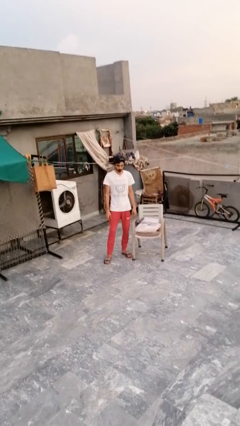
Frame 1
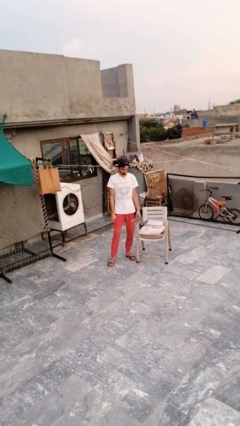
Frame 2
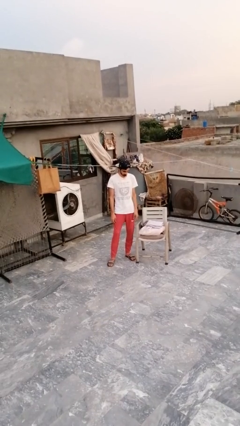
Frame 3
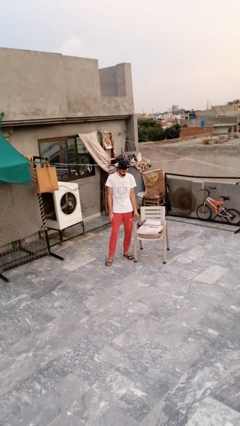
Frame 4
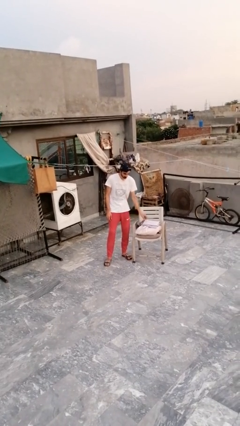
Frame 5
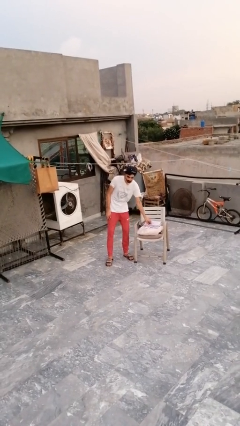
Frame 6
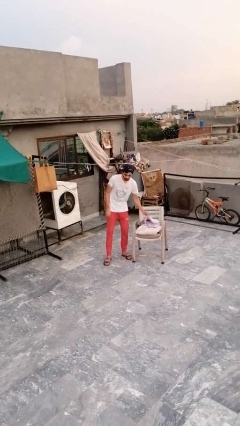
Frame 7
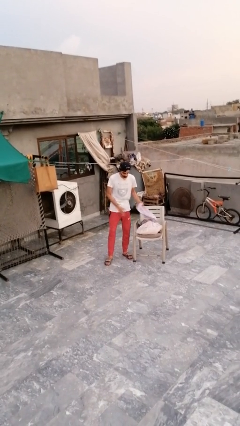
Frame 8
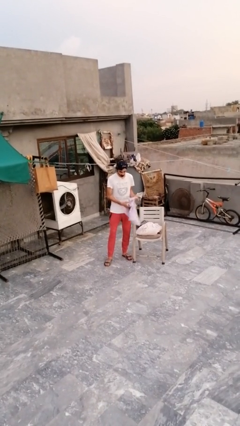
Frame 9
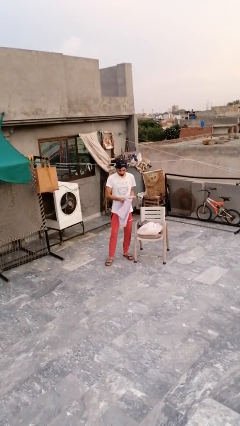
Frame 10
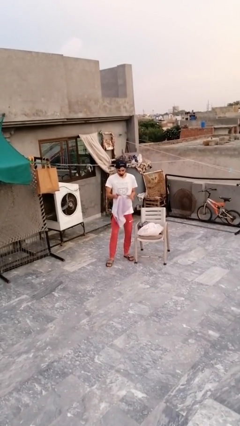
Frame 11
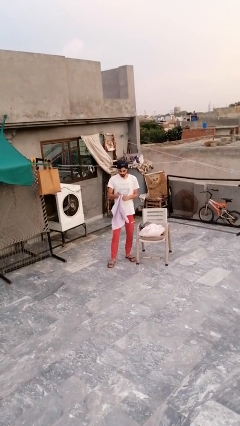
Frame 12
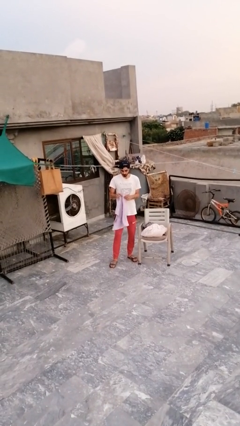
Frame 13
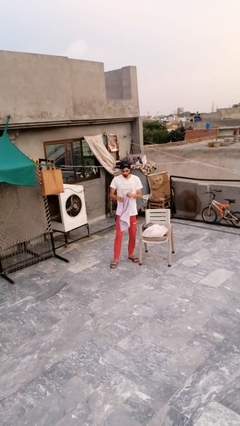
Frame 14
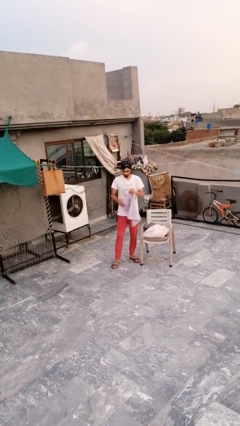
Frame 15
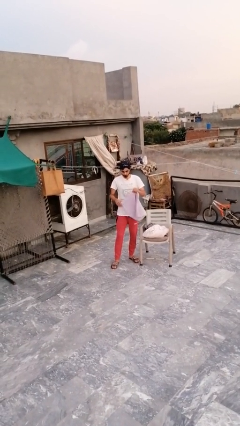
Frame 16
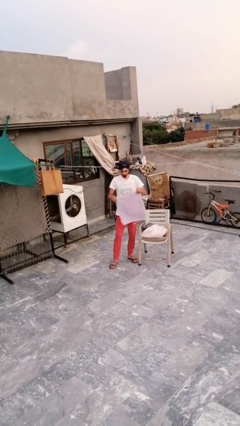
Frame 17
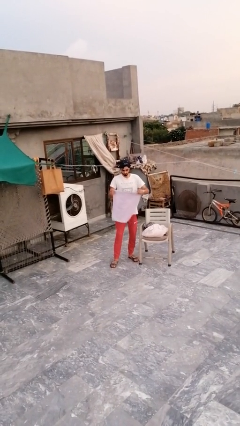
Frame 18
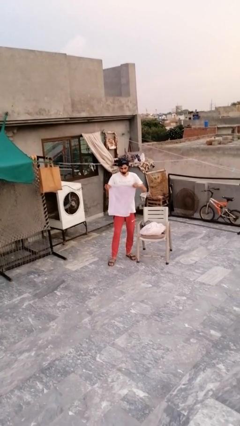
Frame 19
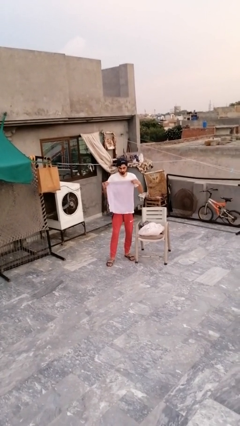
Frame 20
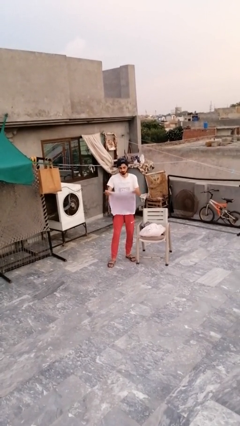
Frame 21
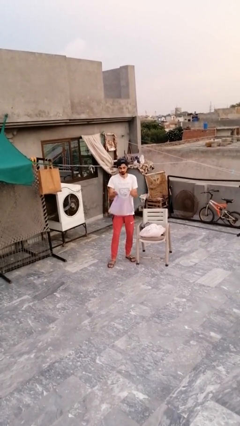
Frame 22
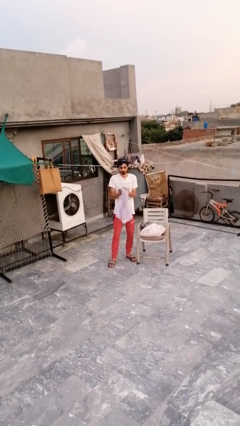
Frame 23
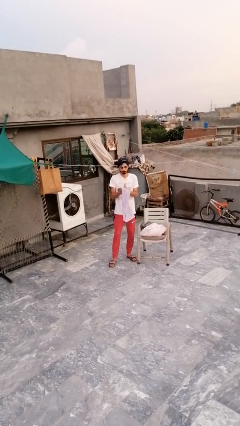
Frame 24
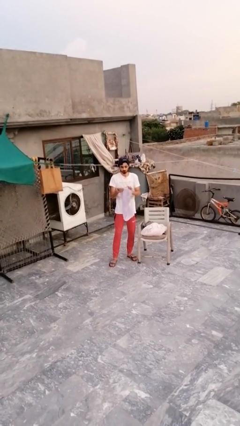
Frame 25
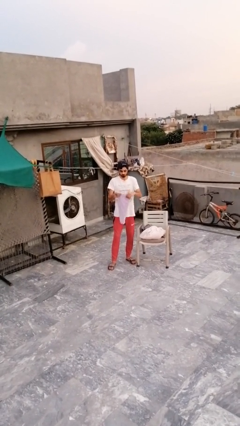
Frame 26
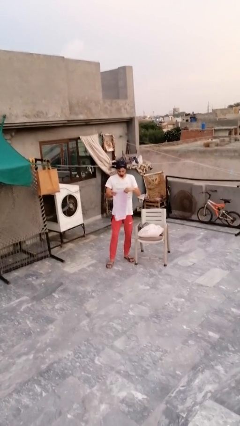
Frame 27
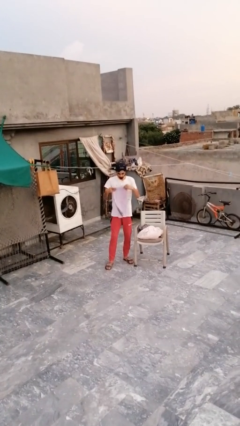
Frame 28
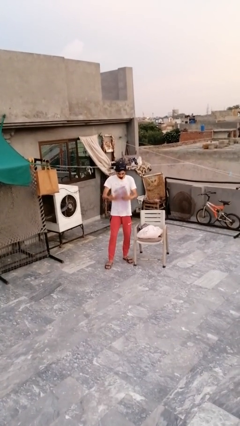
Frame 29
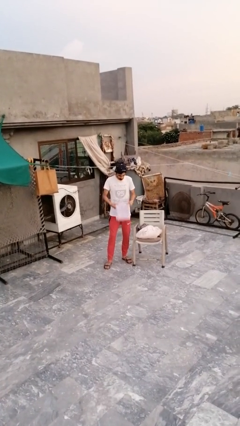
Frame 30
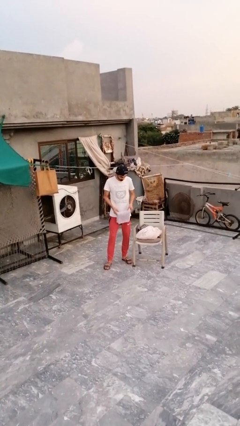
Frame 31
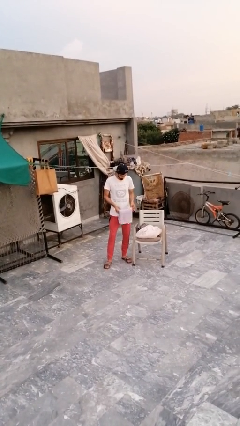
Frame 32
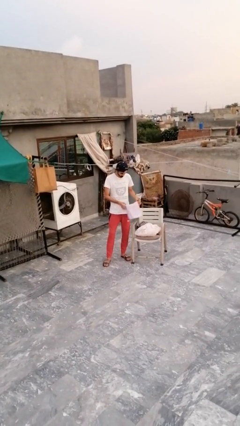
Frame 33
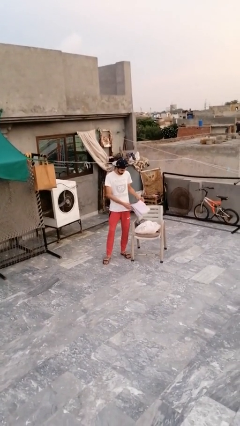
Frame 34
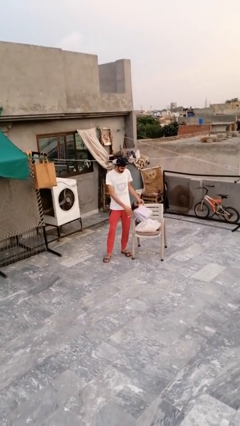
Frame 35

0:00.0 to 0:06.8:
person folds towel

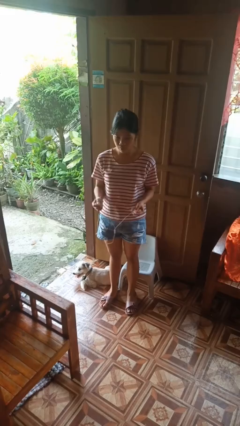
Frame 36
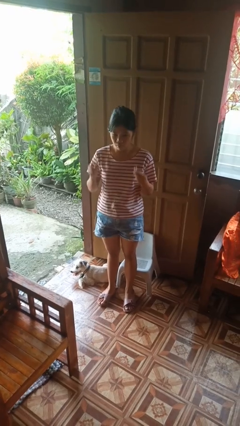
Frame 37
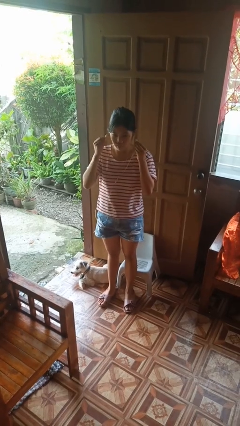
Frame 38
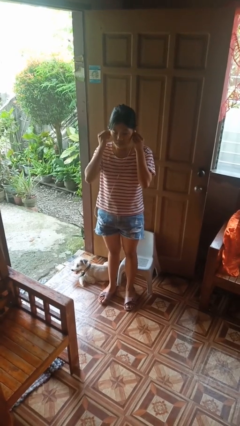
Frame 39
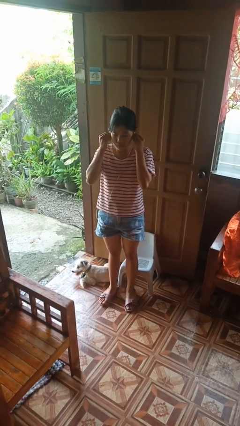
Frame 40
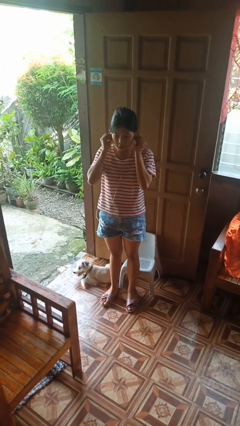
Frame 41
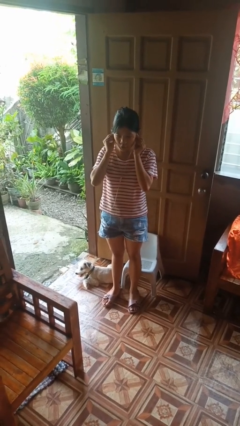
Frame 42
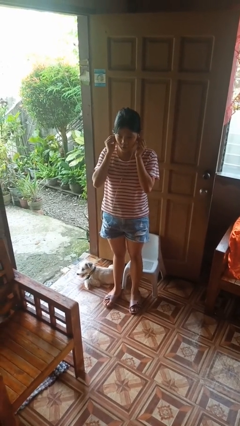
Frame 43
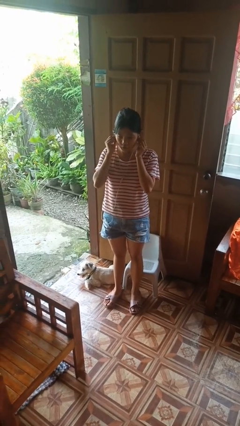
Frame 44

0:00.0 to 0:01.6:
person puts on headphones

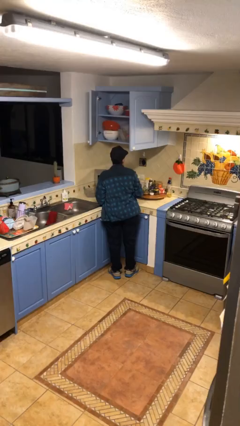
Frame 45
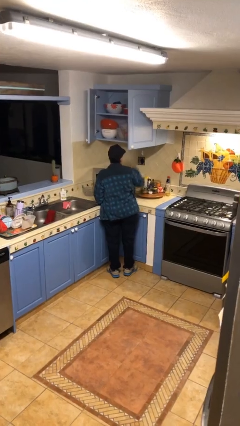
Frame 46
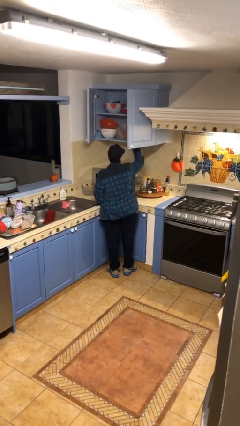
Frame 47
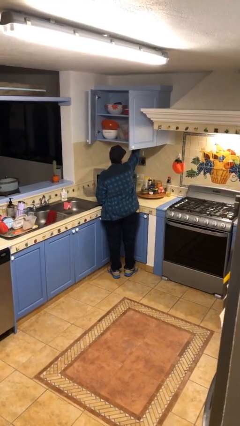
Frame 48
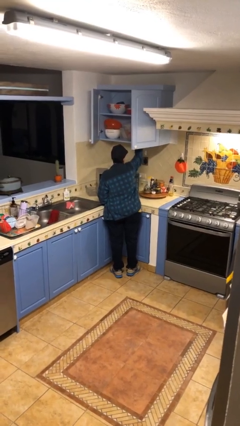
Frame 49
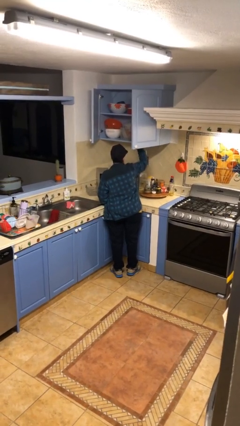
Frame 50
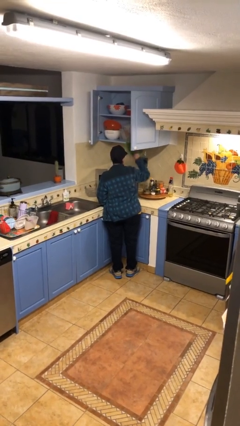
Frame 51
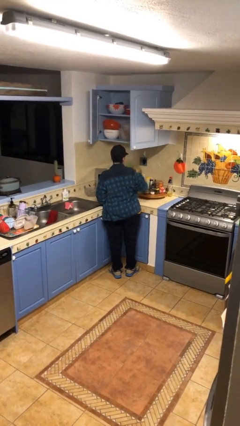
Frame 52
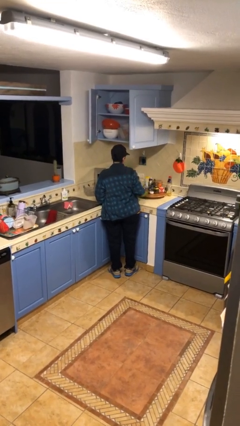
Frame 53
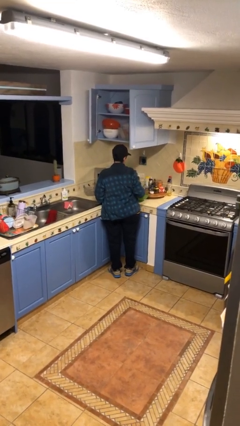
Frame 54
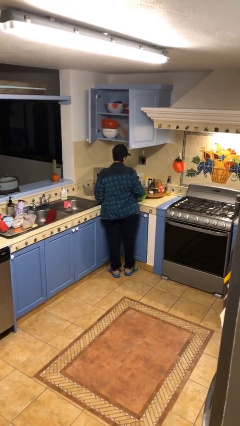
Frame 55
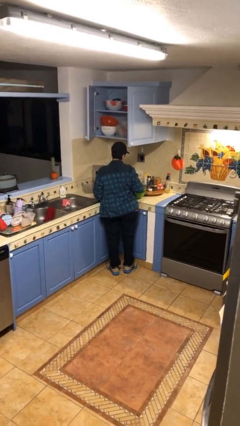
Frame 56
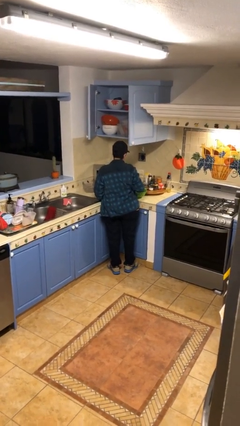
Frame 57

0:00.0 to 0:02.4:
person takes object from cabinet

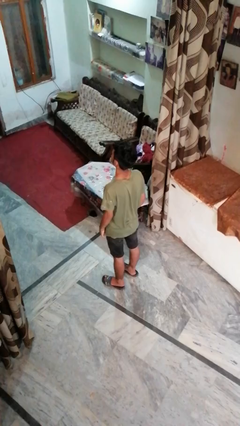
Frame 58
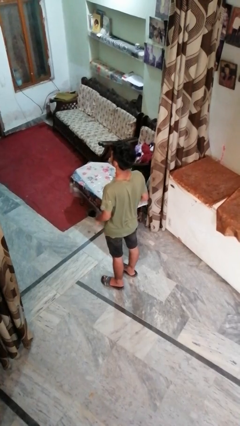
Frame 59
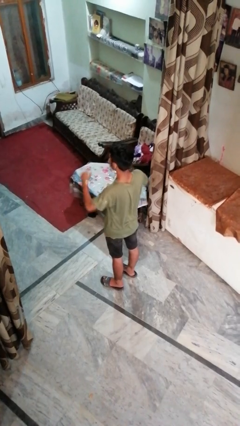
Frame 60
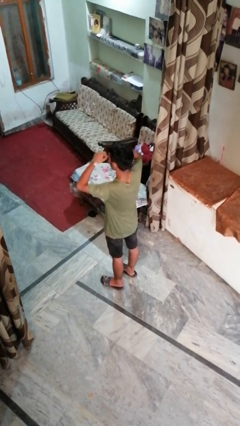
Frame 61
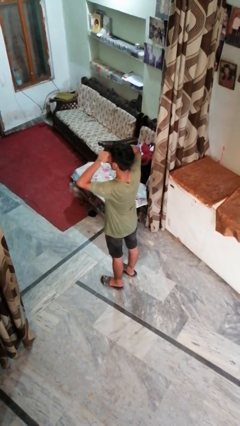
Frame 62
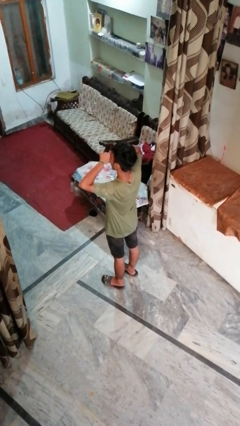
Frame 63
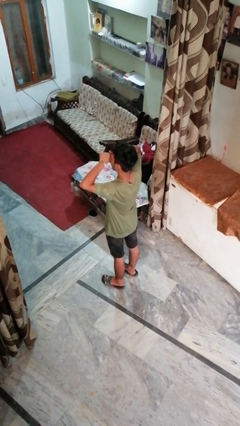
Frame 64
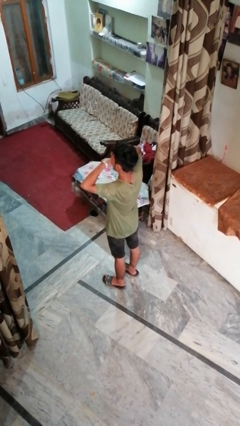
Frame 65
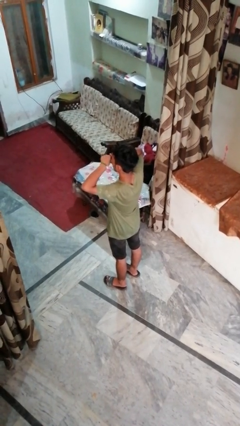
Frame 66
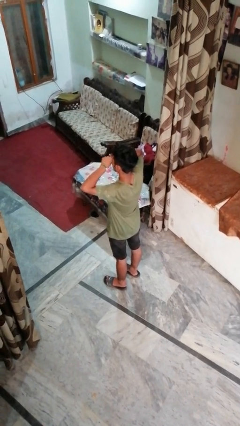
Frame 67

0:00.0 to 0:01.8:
person rubs eyes

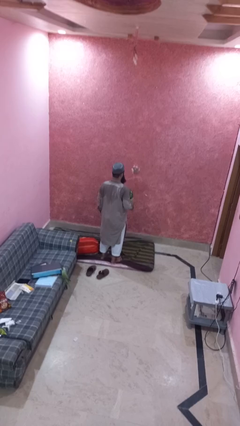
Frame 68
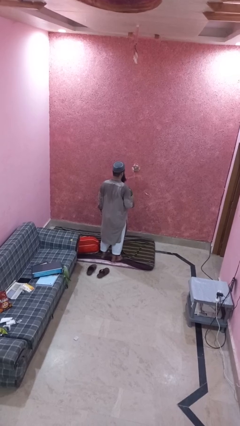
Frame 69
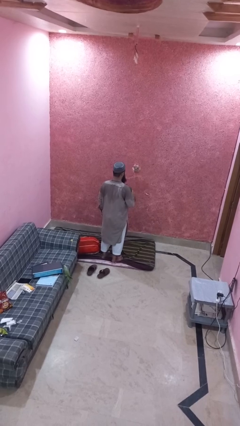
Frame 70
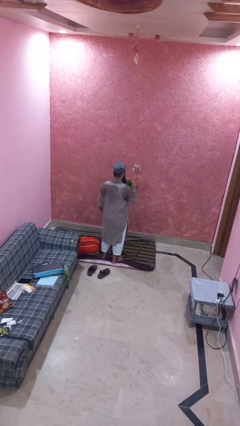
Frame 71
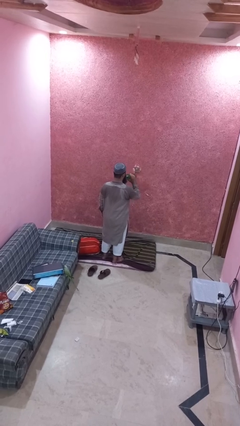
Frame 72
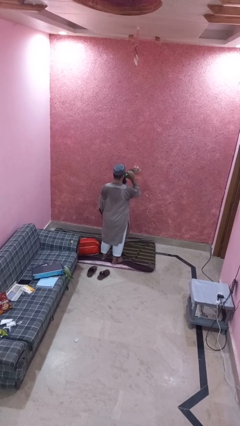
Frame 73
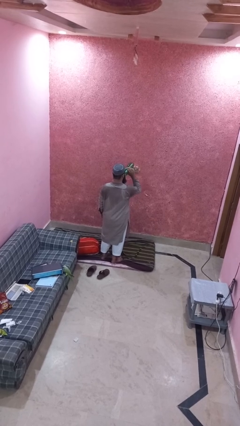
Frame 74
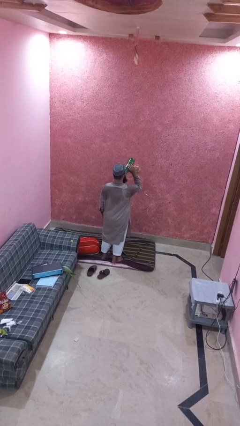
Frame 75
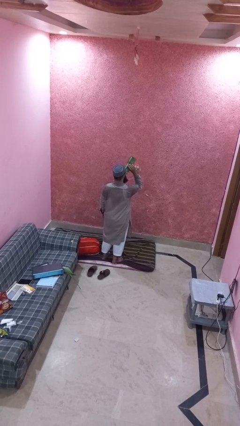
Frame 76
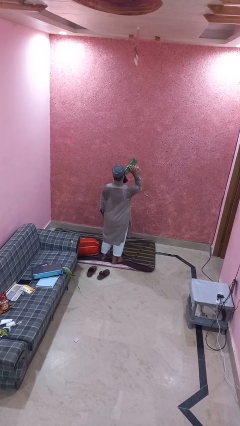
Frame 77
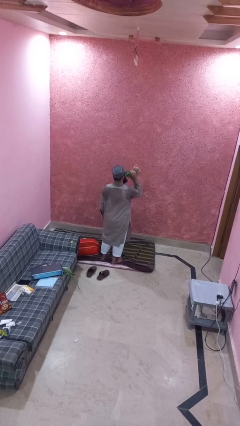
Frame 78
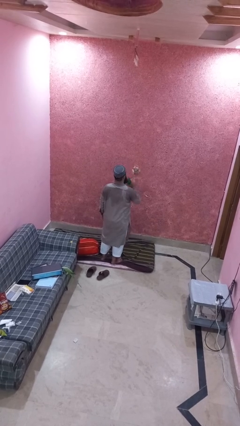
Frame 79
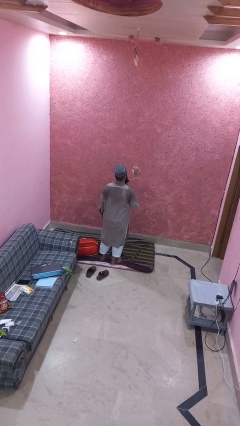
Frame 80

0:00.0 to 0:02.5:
person drinks from bottle

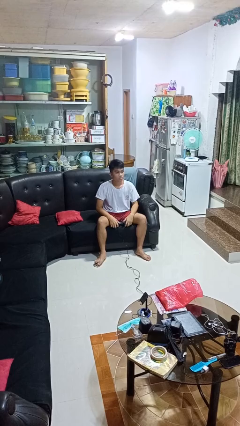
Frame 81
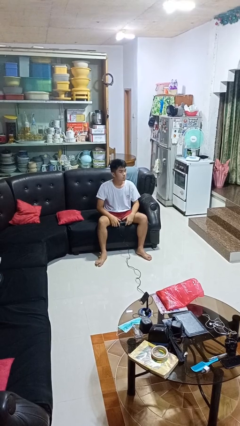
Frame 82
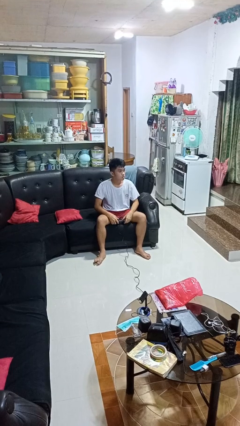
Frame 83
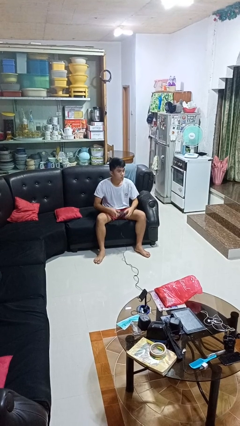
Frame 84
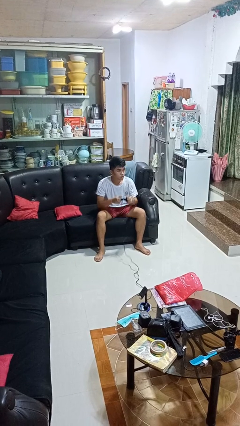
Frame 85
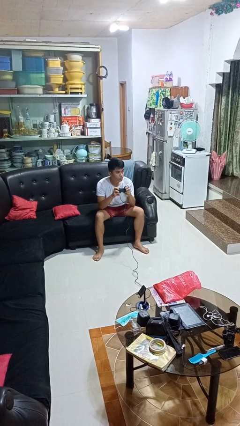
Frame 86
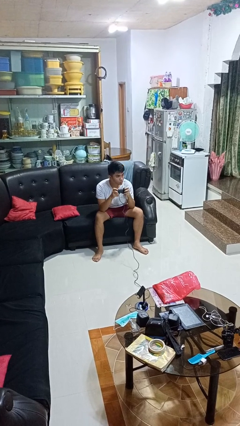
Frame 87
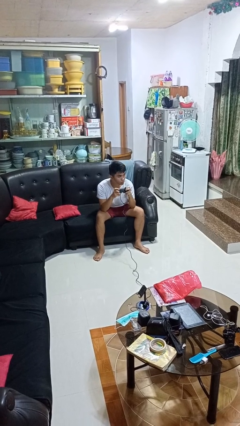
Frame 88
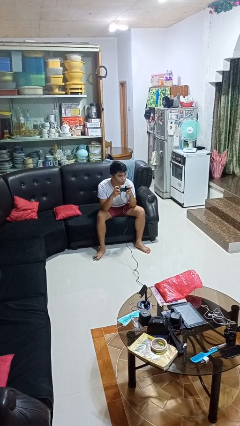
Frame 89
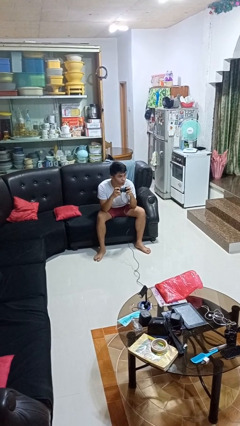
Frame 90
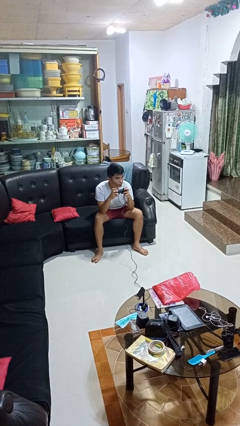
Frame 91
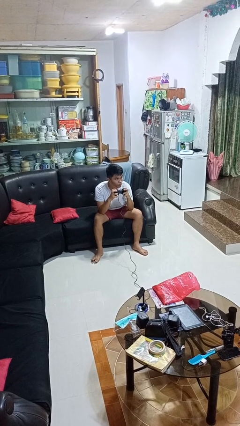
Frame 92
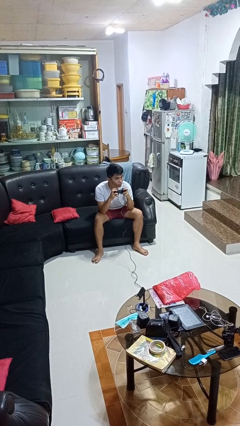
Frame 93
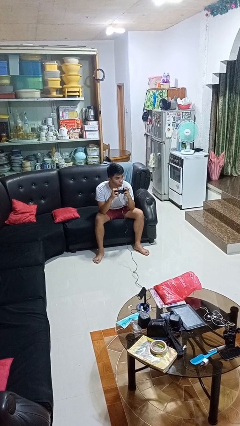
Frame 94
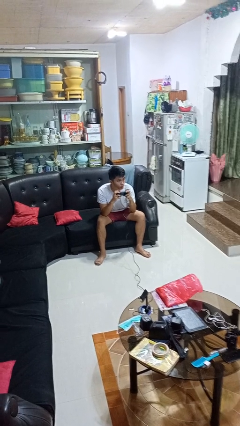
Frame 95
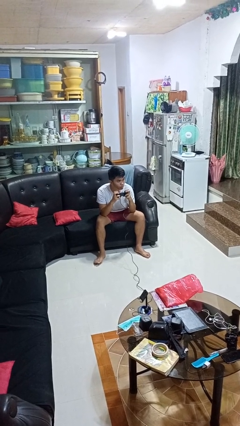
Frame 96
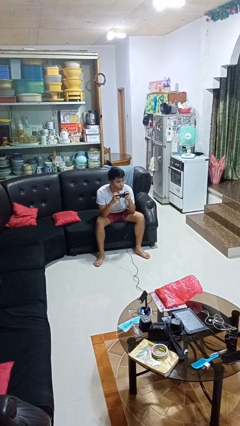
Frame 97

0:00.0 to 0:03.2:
person interacts with handheld game
